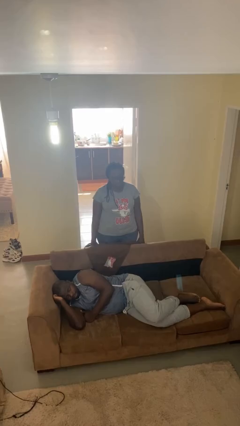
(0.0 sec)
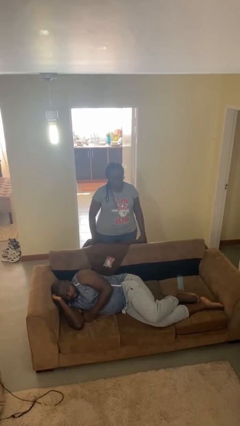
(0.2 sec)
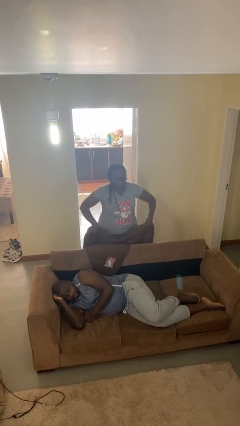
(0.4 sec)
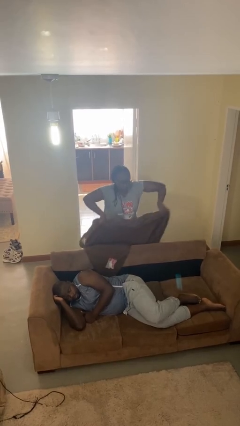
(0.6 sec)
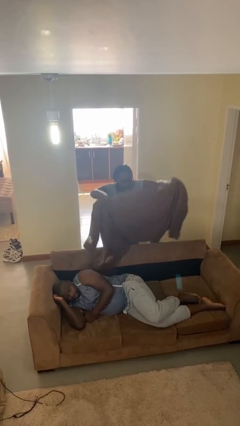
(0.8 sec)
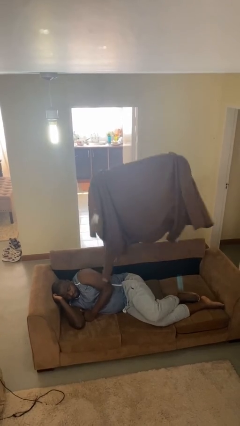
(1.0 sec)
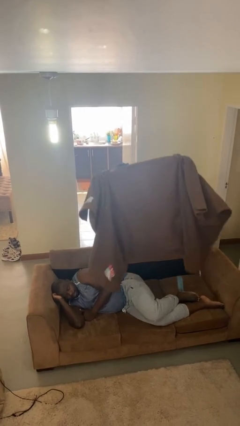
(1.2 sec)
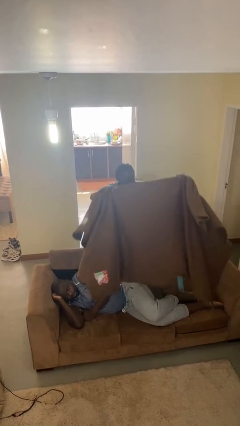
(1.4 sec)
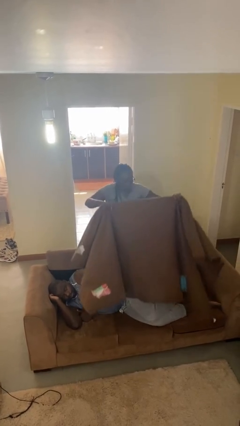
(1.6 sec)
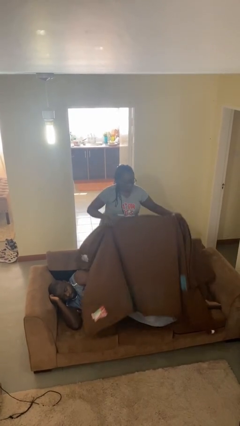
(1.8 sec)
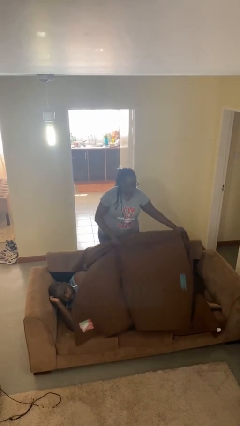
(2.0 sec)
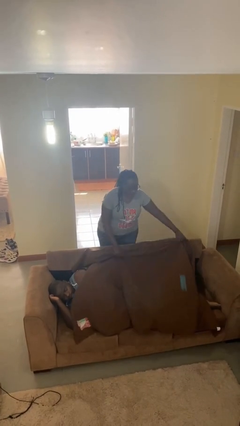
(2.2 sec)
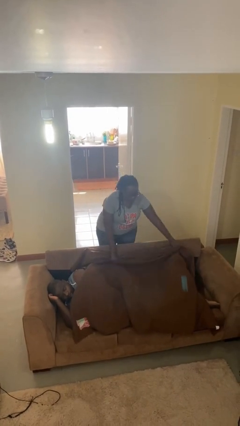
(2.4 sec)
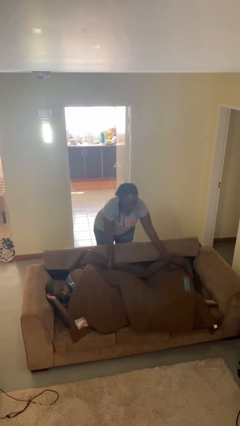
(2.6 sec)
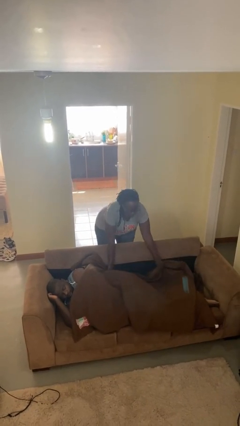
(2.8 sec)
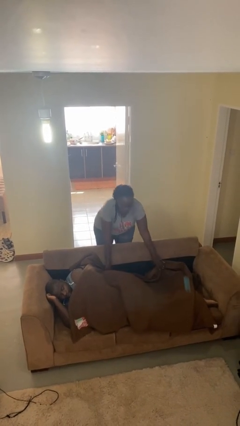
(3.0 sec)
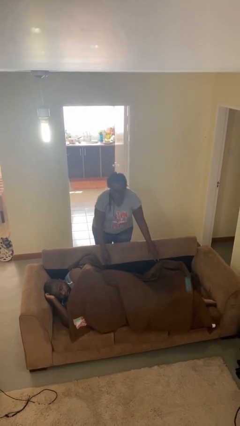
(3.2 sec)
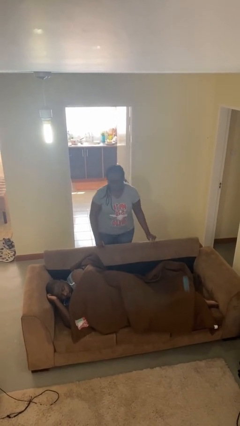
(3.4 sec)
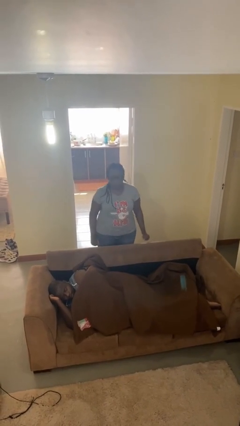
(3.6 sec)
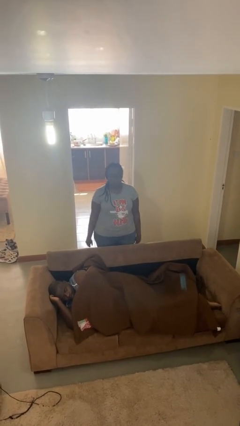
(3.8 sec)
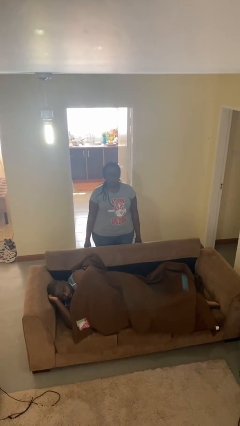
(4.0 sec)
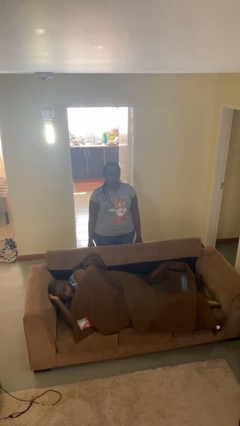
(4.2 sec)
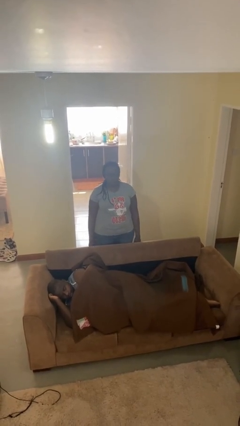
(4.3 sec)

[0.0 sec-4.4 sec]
person covers friend with blanket

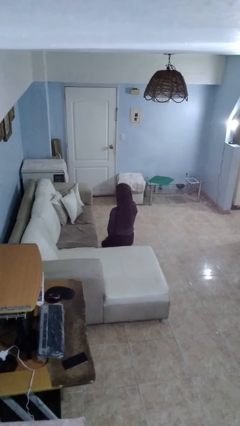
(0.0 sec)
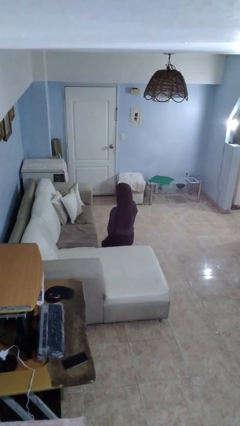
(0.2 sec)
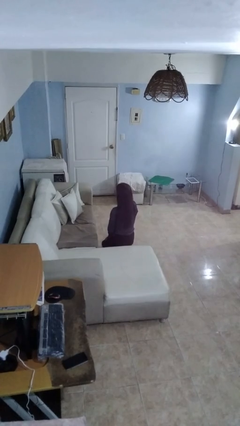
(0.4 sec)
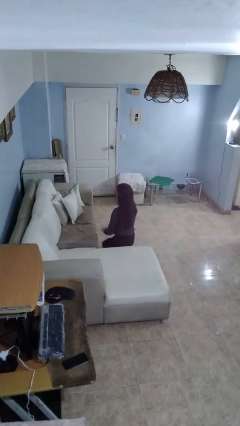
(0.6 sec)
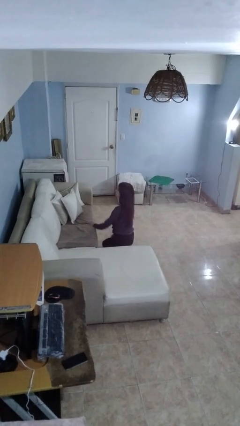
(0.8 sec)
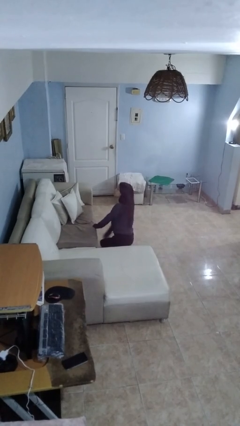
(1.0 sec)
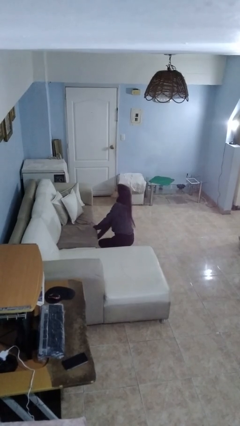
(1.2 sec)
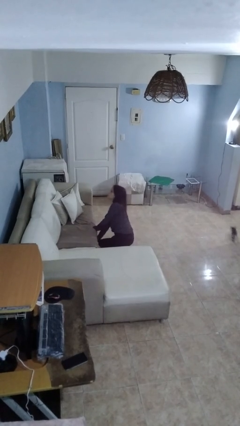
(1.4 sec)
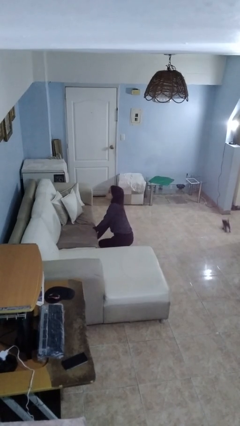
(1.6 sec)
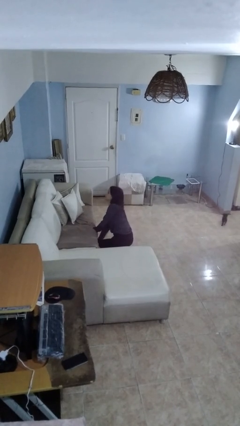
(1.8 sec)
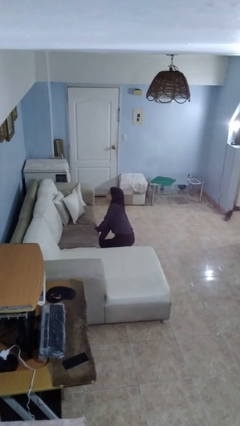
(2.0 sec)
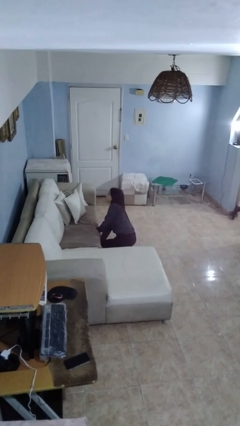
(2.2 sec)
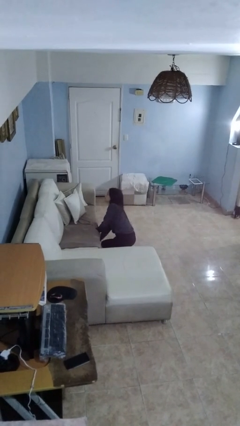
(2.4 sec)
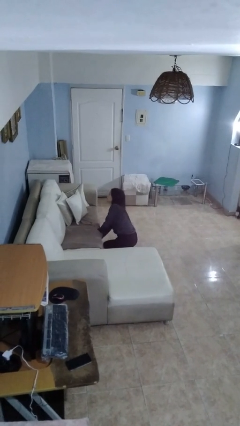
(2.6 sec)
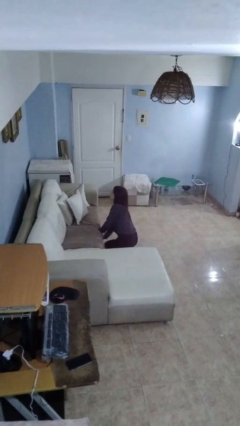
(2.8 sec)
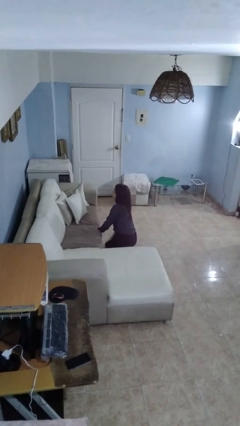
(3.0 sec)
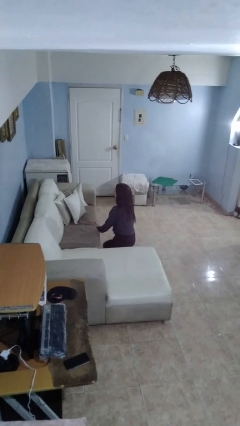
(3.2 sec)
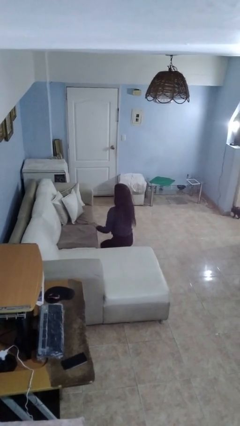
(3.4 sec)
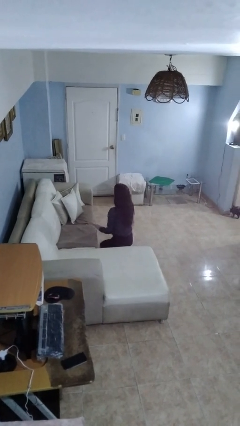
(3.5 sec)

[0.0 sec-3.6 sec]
person searches under couch

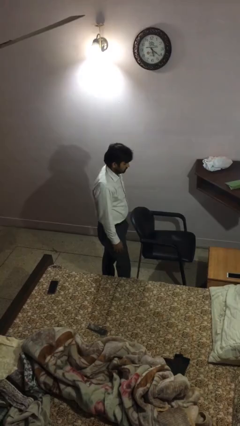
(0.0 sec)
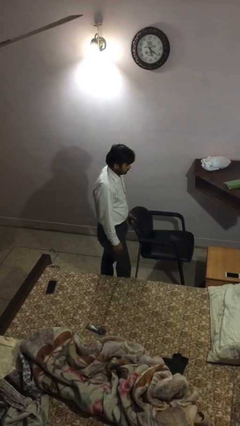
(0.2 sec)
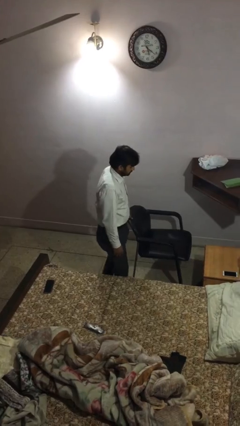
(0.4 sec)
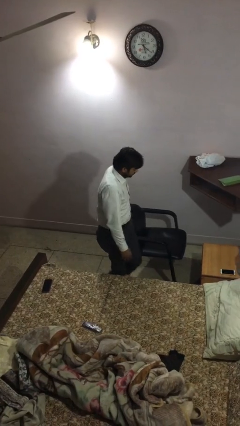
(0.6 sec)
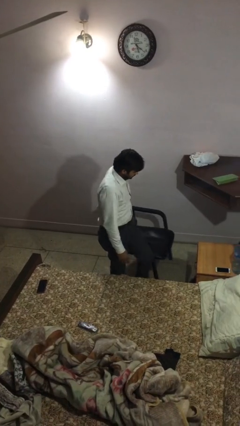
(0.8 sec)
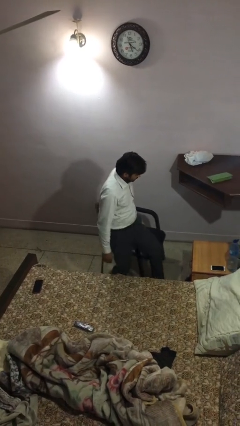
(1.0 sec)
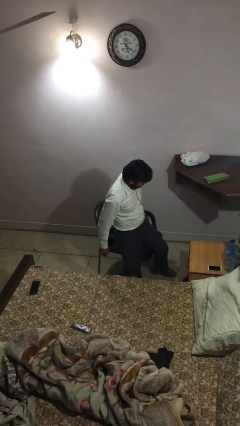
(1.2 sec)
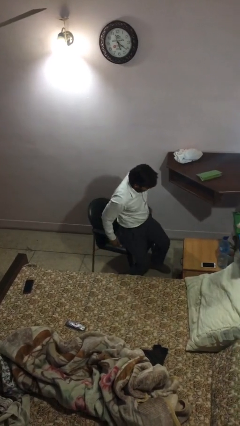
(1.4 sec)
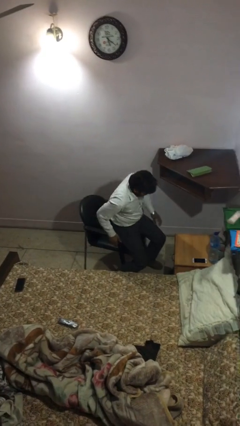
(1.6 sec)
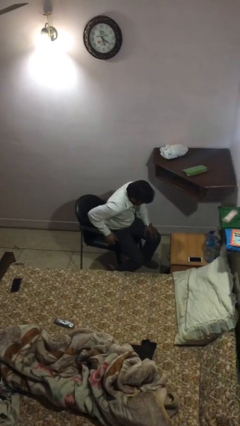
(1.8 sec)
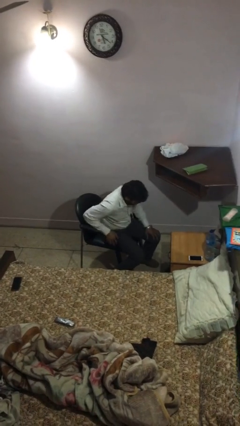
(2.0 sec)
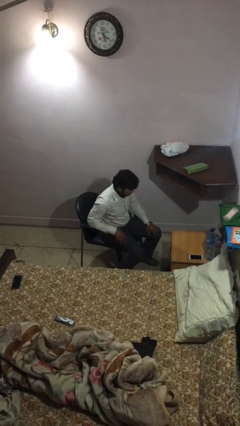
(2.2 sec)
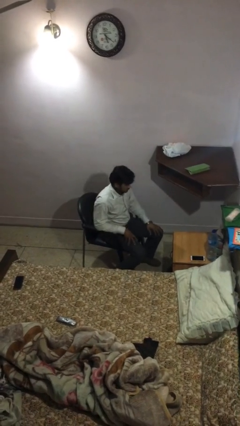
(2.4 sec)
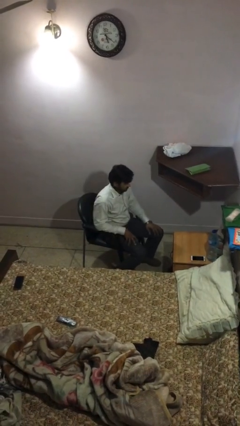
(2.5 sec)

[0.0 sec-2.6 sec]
person sits down

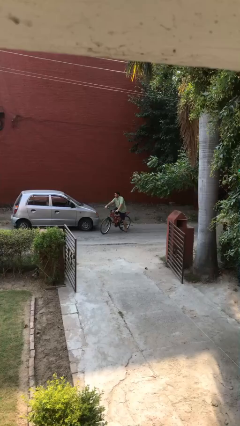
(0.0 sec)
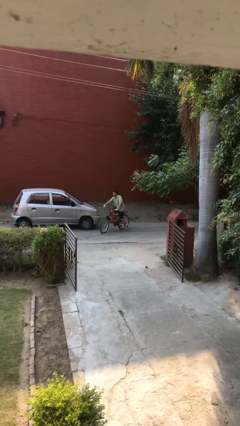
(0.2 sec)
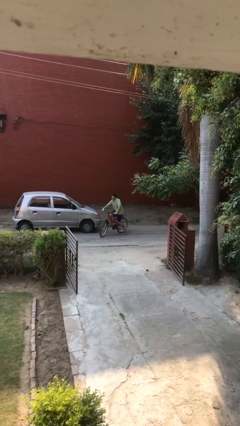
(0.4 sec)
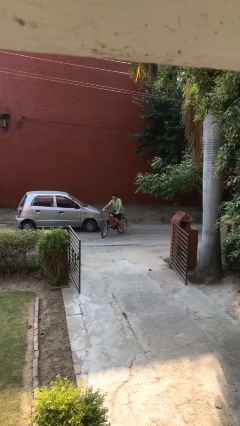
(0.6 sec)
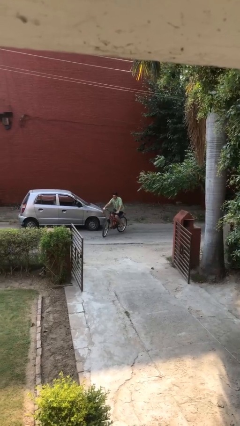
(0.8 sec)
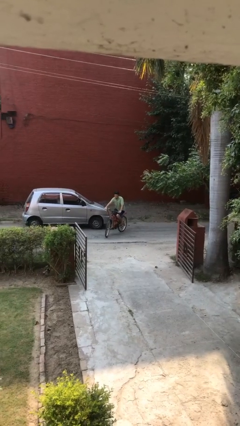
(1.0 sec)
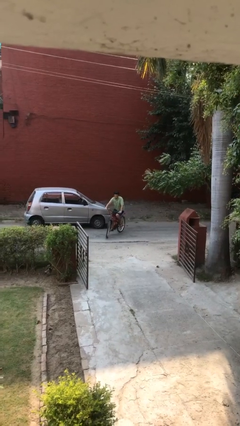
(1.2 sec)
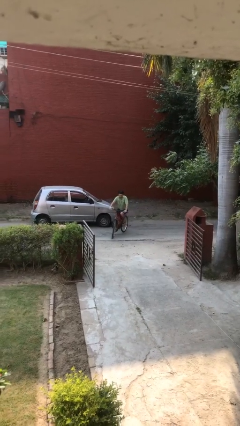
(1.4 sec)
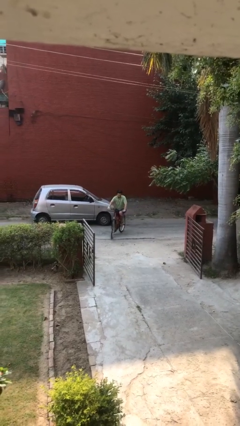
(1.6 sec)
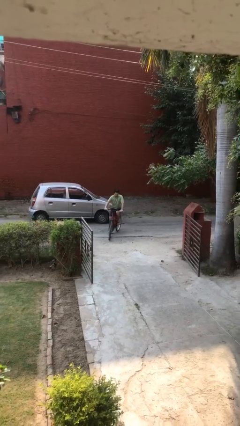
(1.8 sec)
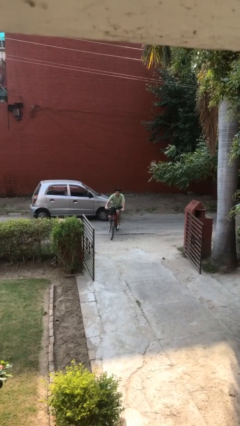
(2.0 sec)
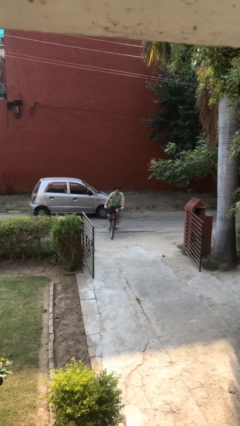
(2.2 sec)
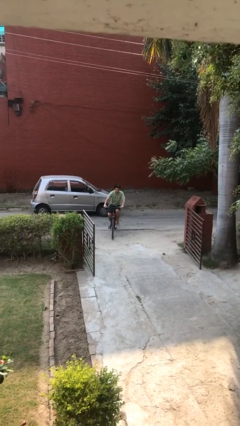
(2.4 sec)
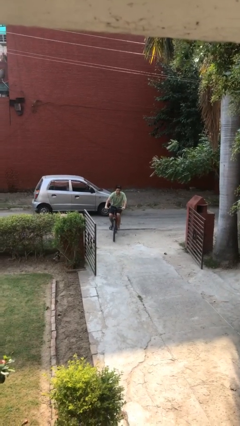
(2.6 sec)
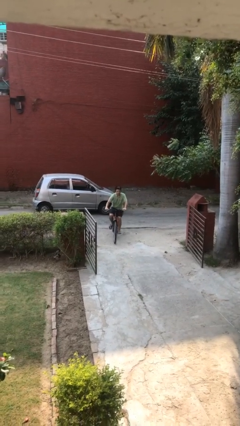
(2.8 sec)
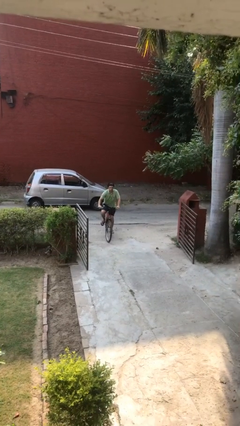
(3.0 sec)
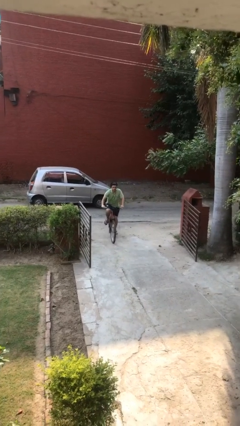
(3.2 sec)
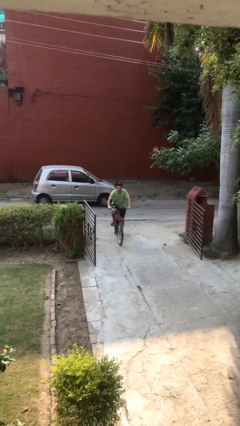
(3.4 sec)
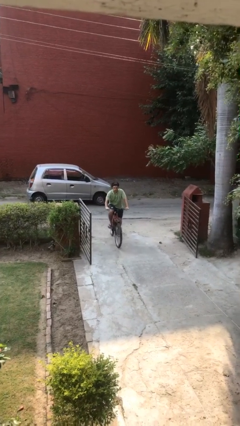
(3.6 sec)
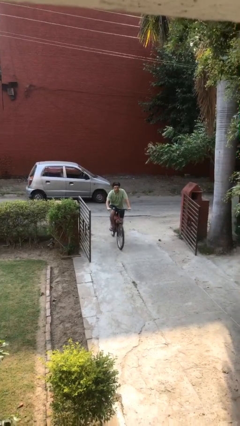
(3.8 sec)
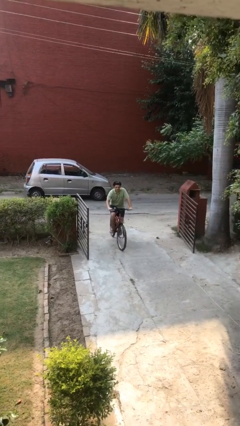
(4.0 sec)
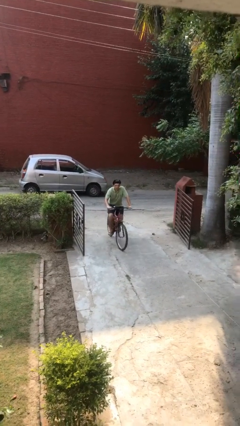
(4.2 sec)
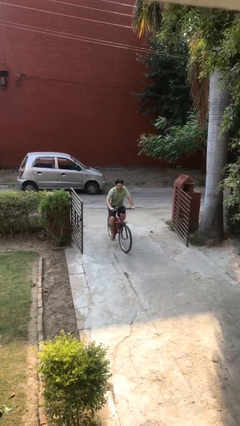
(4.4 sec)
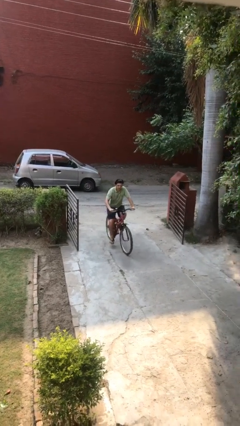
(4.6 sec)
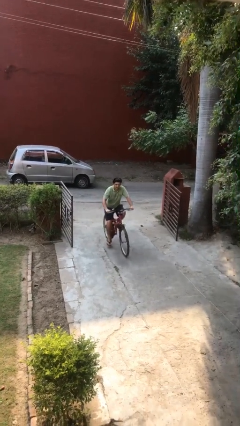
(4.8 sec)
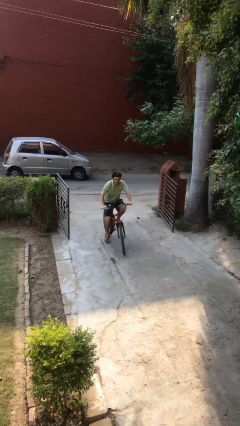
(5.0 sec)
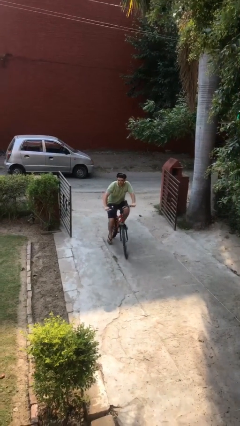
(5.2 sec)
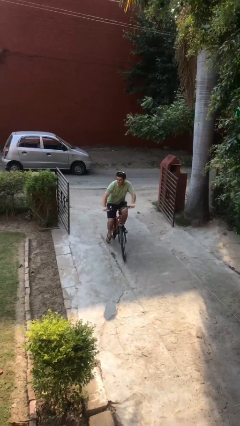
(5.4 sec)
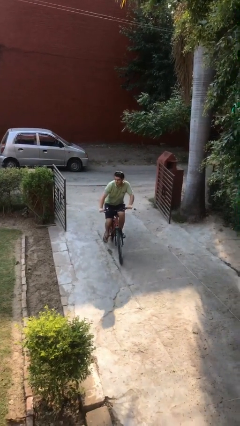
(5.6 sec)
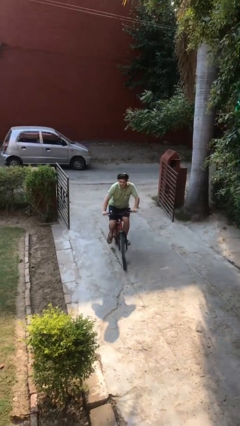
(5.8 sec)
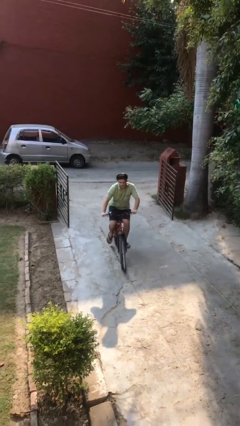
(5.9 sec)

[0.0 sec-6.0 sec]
person rides bicycle

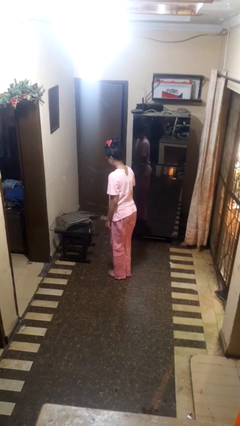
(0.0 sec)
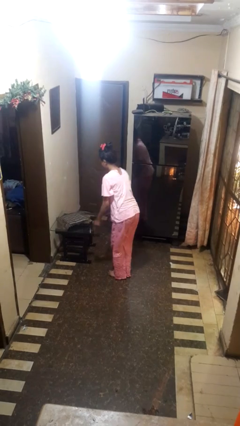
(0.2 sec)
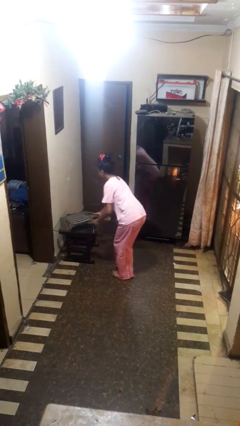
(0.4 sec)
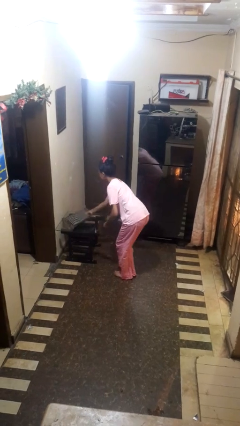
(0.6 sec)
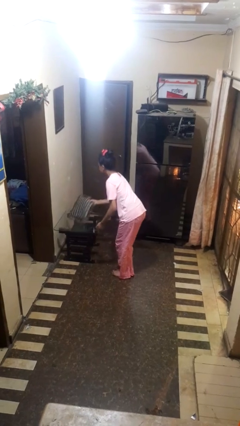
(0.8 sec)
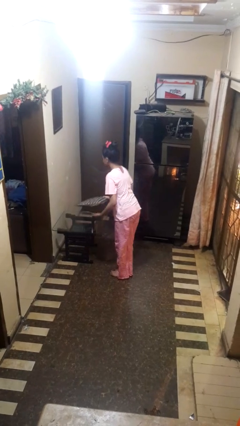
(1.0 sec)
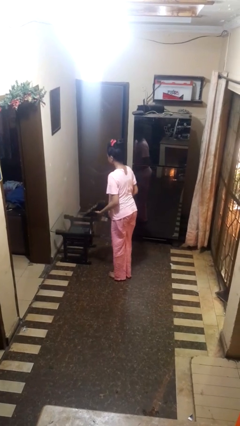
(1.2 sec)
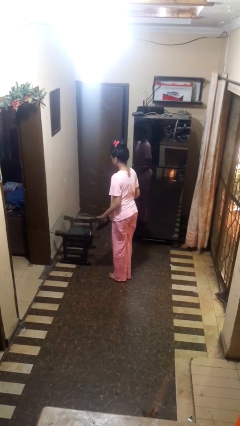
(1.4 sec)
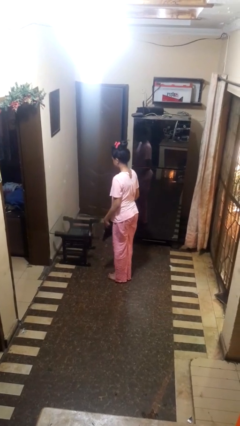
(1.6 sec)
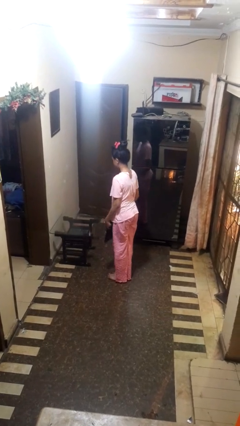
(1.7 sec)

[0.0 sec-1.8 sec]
person picks up object from table
